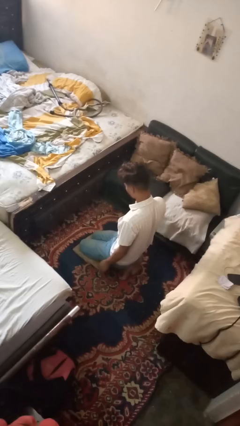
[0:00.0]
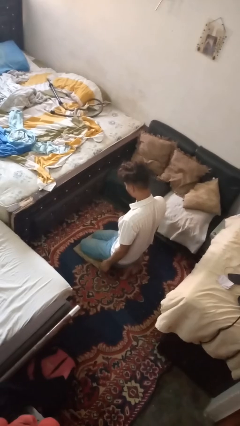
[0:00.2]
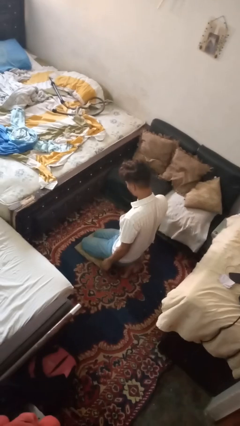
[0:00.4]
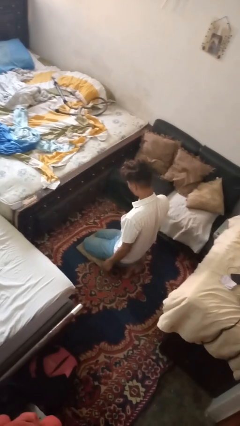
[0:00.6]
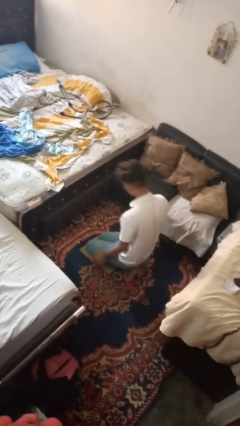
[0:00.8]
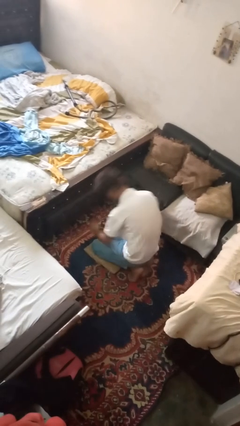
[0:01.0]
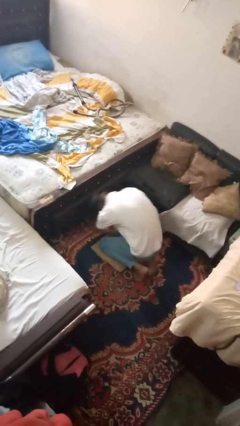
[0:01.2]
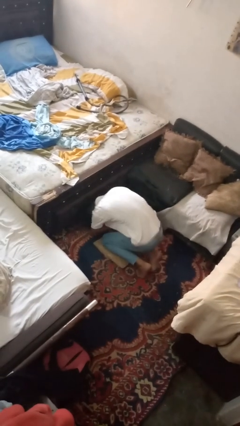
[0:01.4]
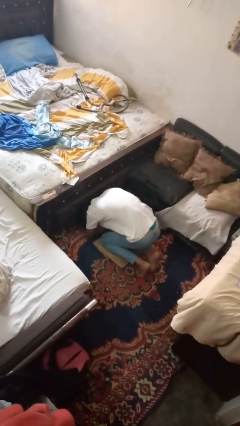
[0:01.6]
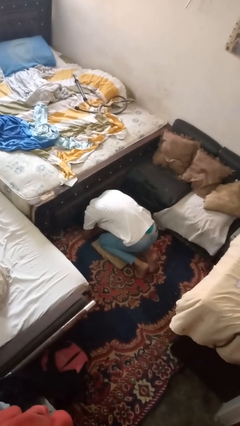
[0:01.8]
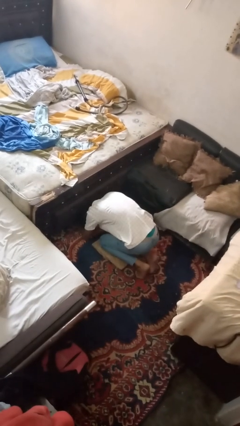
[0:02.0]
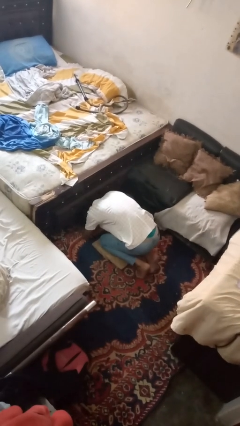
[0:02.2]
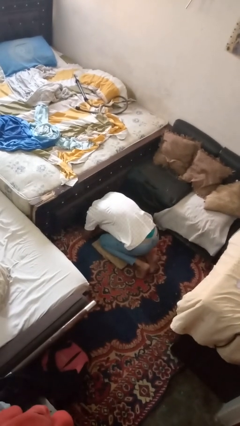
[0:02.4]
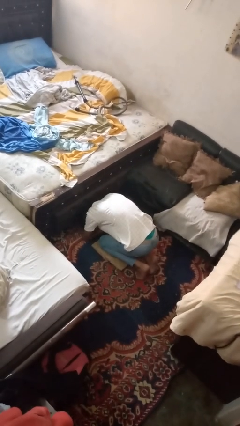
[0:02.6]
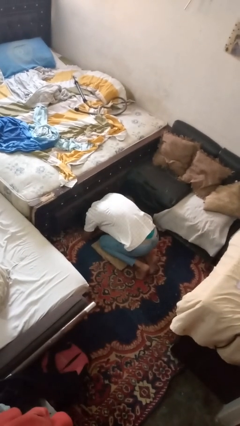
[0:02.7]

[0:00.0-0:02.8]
person searches under bed

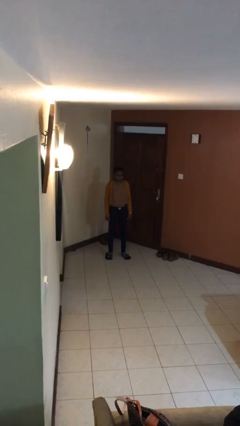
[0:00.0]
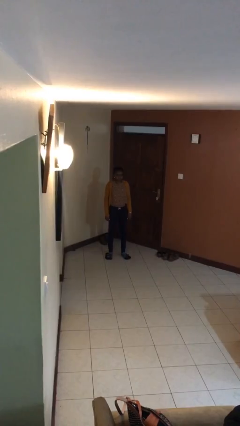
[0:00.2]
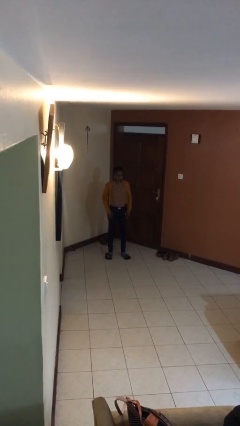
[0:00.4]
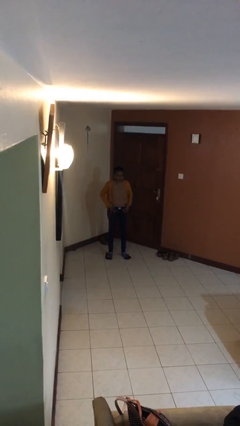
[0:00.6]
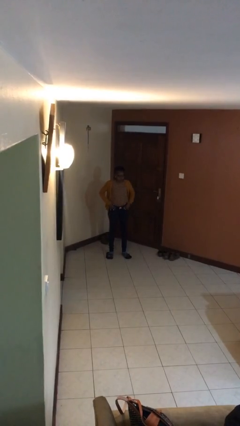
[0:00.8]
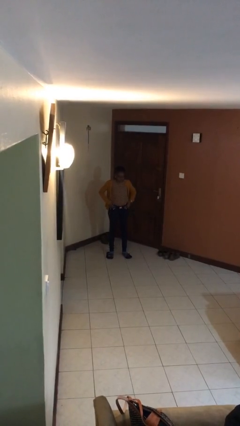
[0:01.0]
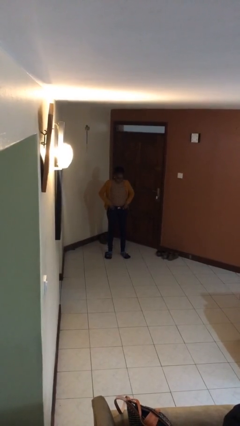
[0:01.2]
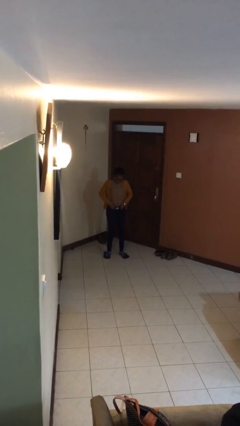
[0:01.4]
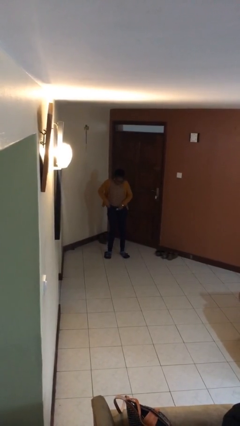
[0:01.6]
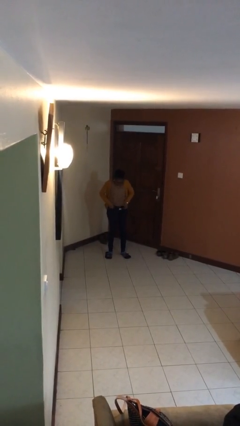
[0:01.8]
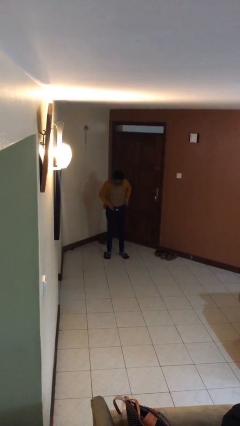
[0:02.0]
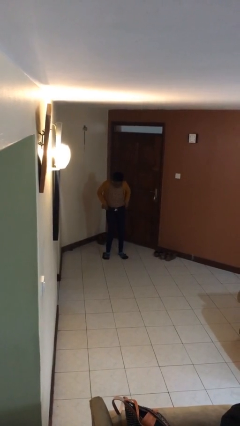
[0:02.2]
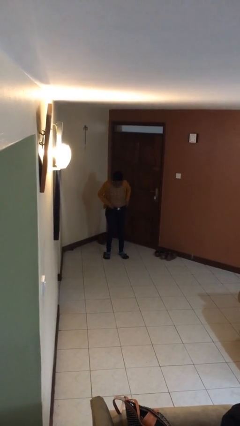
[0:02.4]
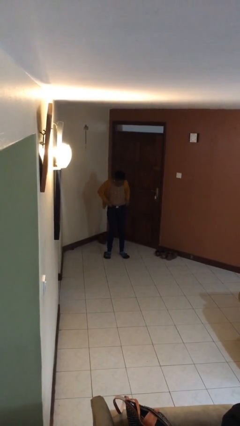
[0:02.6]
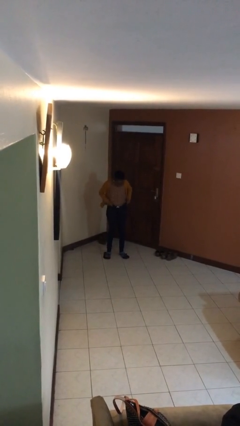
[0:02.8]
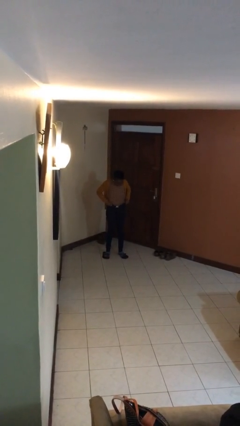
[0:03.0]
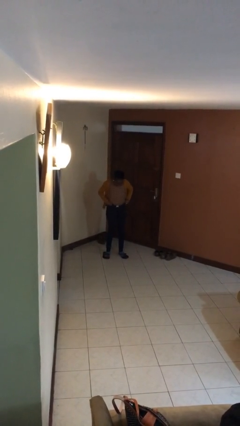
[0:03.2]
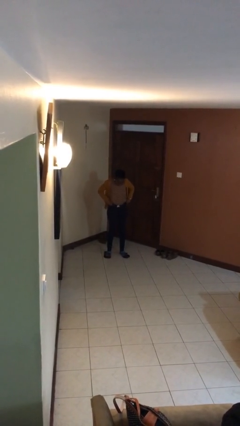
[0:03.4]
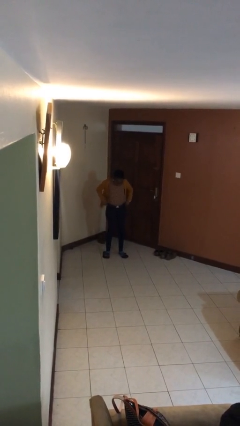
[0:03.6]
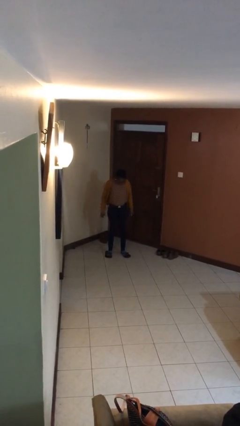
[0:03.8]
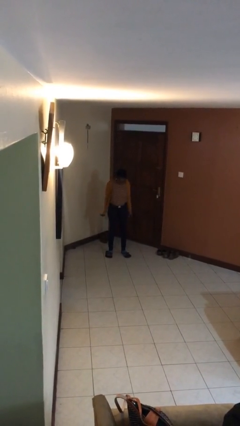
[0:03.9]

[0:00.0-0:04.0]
person hikes up pants

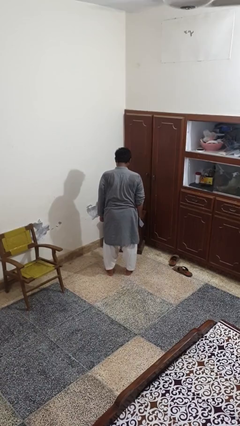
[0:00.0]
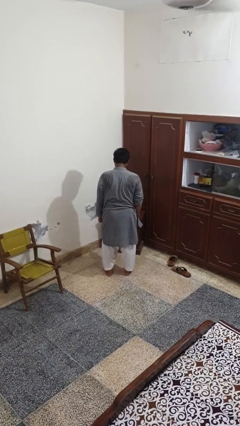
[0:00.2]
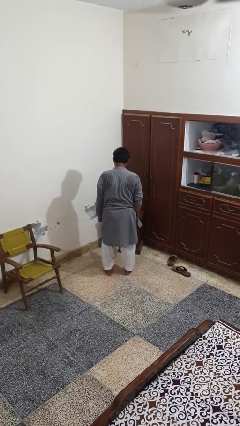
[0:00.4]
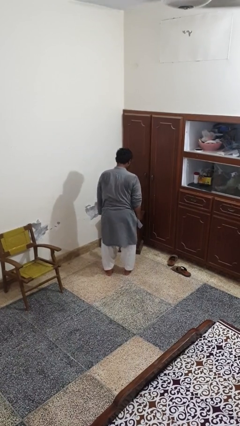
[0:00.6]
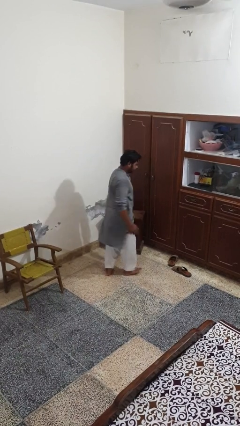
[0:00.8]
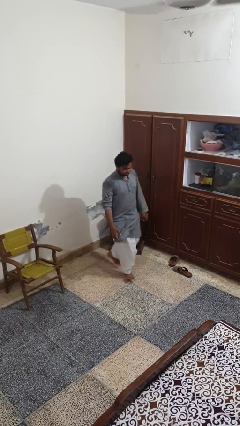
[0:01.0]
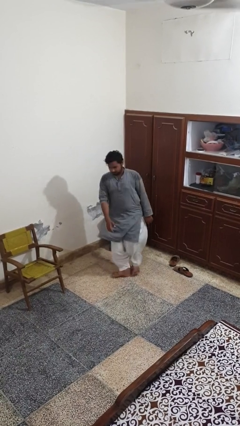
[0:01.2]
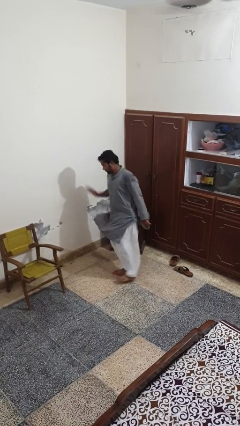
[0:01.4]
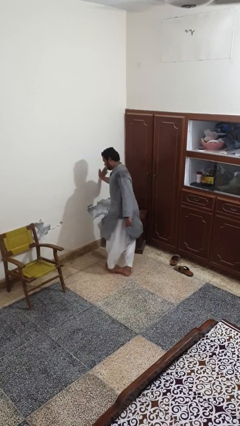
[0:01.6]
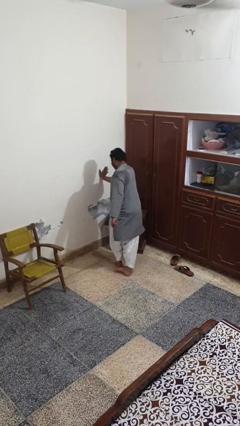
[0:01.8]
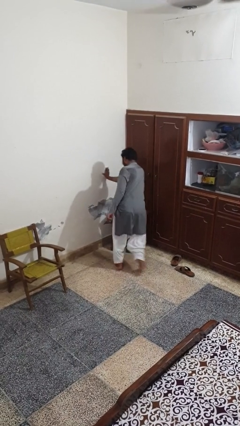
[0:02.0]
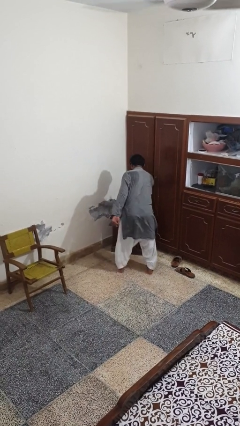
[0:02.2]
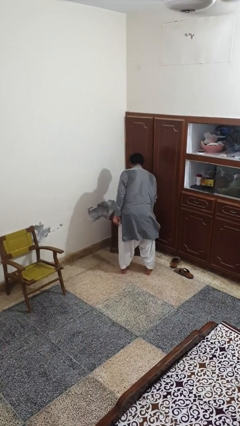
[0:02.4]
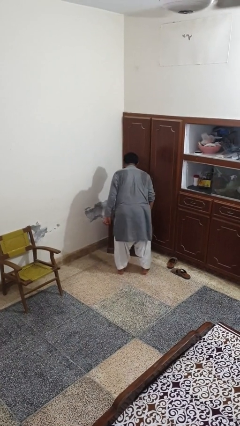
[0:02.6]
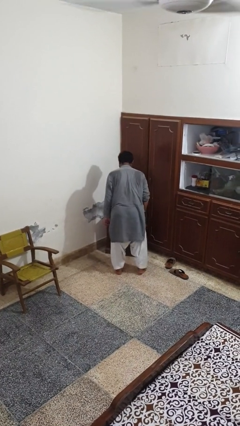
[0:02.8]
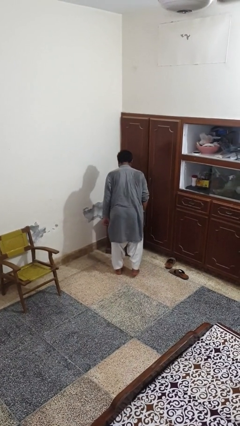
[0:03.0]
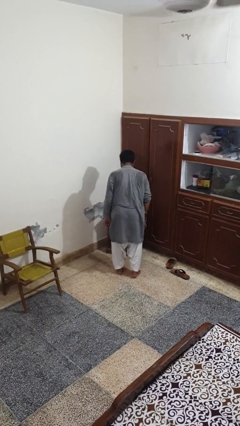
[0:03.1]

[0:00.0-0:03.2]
person twirls

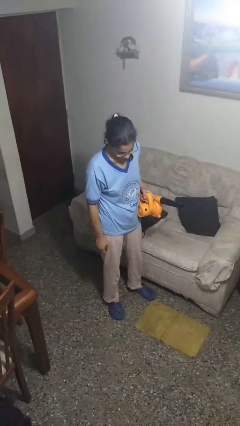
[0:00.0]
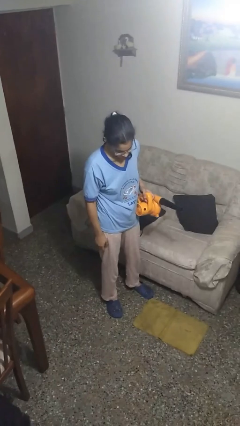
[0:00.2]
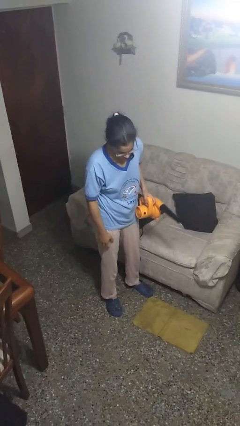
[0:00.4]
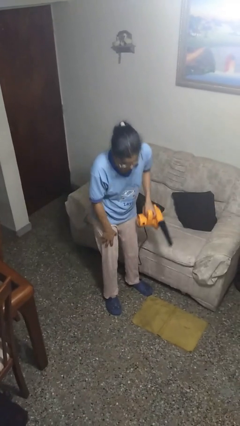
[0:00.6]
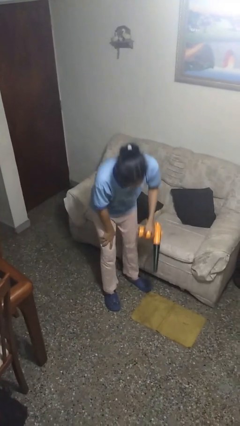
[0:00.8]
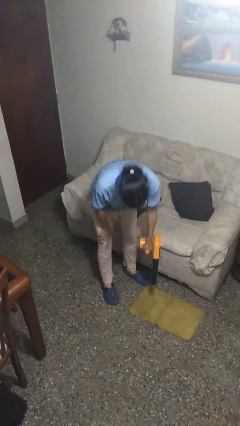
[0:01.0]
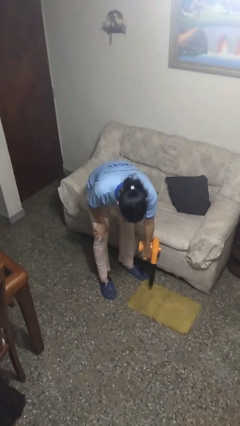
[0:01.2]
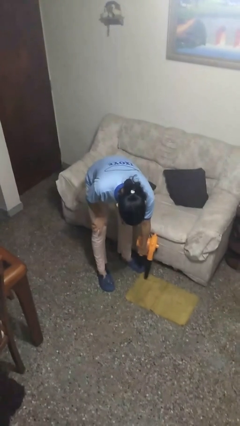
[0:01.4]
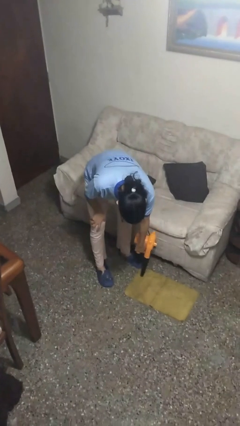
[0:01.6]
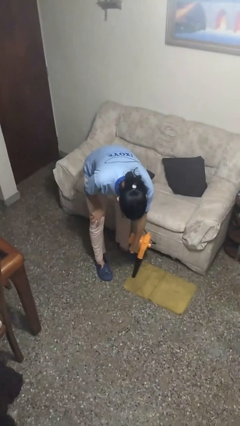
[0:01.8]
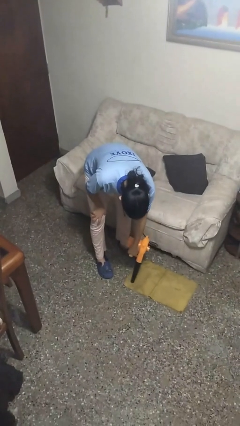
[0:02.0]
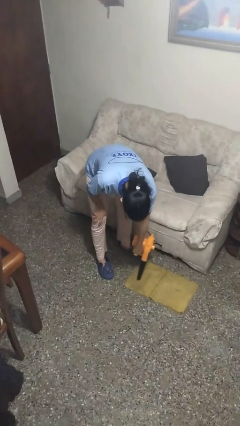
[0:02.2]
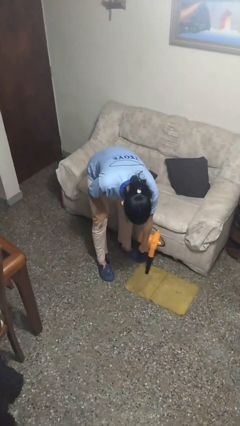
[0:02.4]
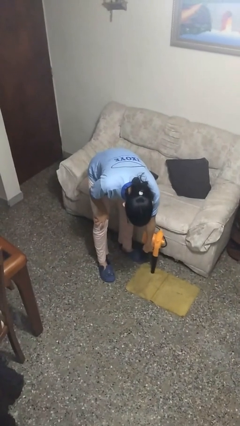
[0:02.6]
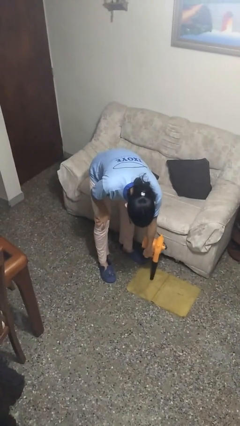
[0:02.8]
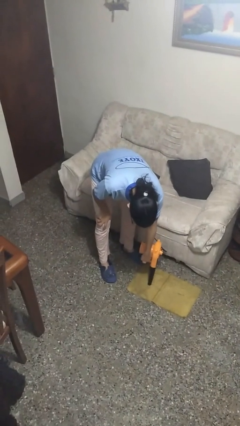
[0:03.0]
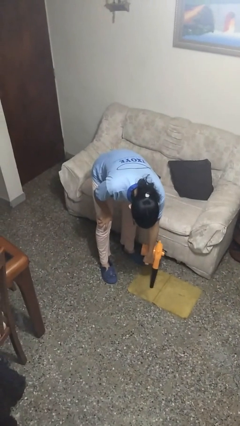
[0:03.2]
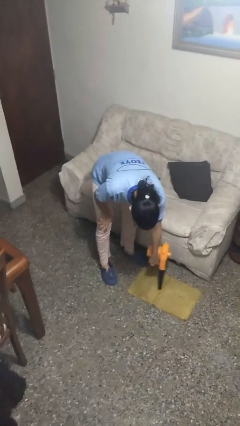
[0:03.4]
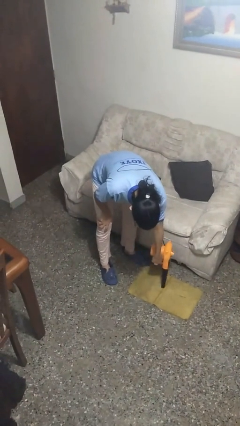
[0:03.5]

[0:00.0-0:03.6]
person vacuums carpet

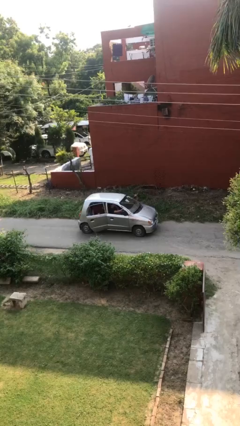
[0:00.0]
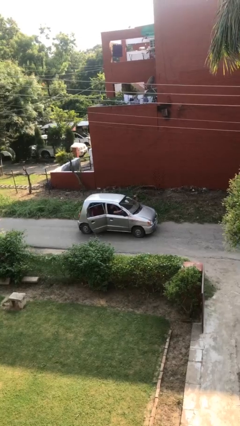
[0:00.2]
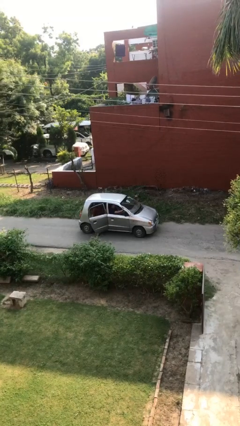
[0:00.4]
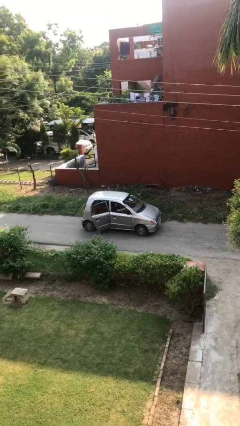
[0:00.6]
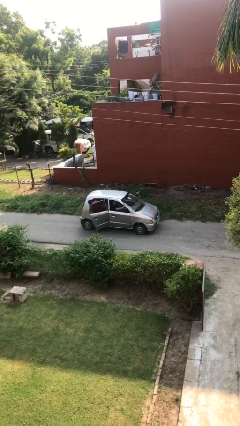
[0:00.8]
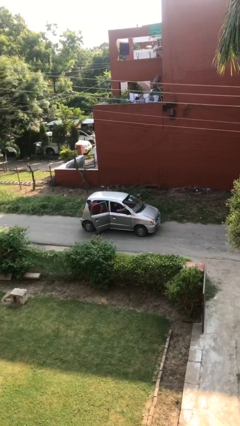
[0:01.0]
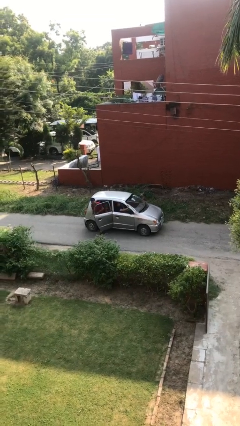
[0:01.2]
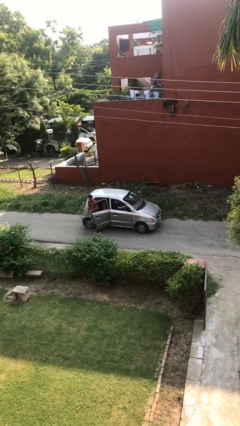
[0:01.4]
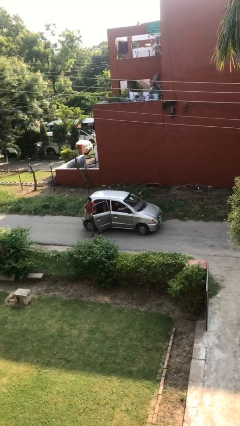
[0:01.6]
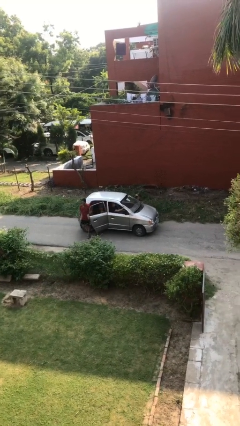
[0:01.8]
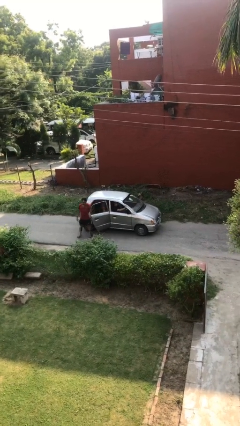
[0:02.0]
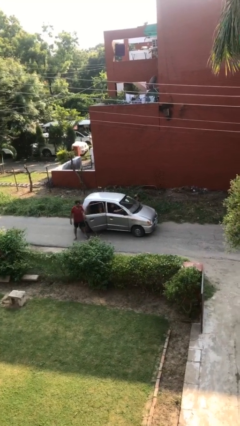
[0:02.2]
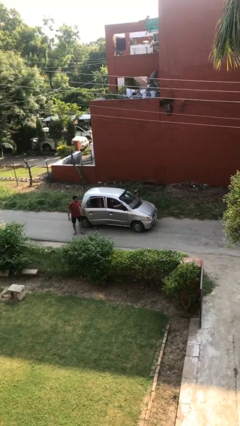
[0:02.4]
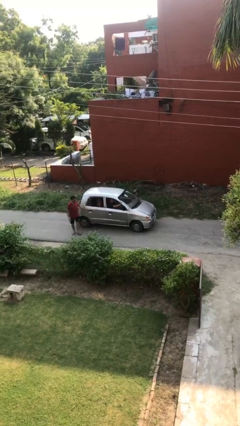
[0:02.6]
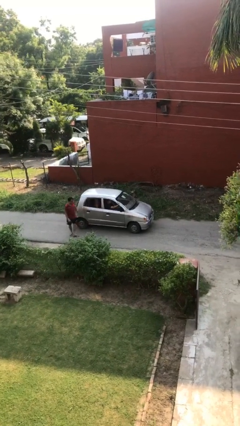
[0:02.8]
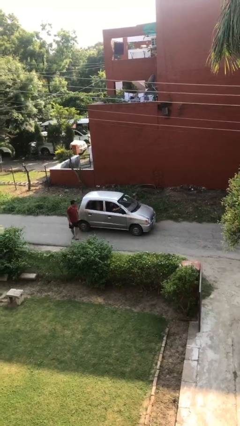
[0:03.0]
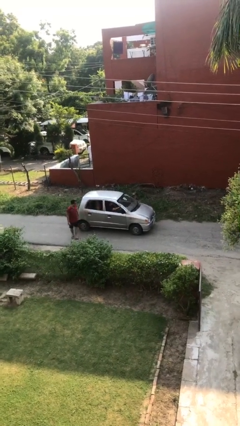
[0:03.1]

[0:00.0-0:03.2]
car drops off person
